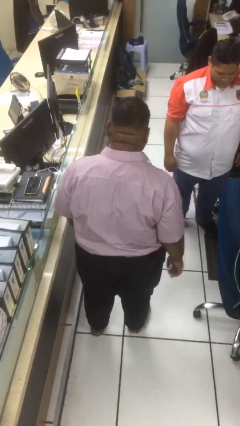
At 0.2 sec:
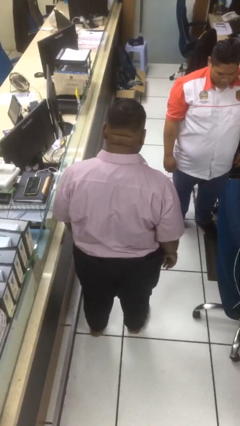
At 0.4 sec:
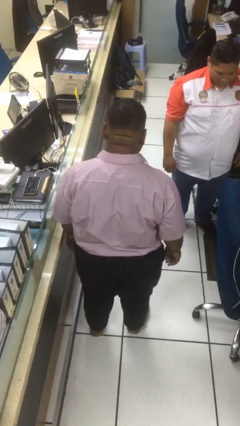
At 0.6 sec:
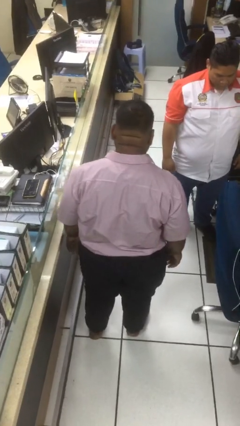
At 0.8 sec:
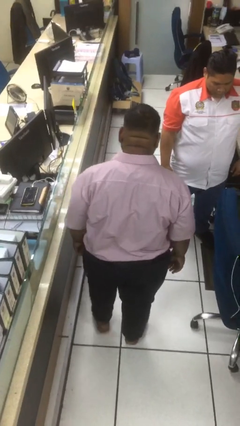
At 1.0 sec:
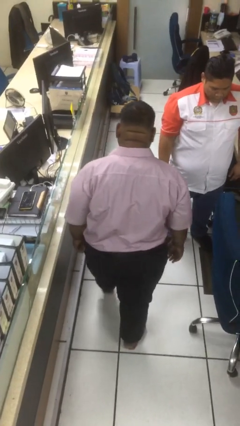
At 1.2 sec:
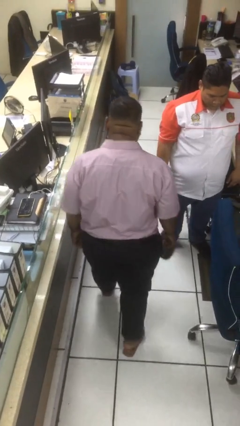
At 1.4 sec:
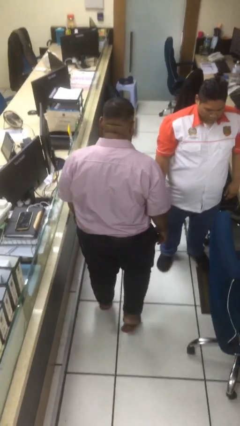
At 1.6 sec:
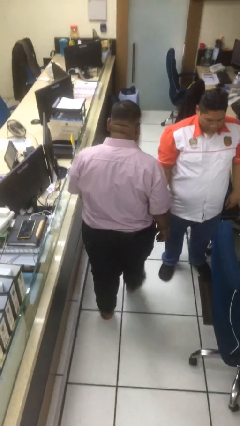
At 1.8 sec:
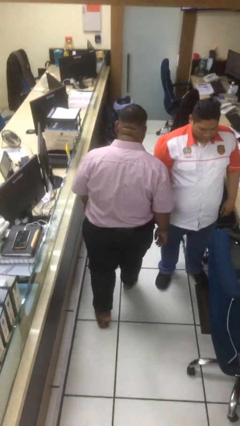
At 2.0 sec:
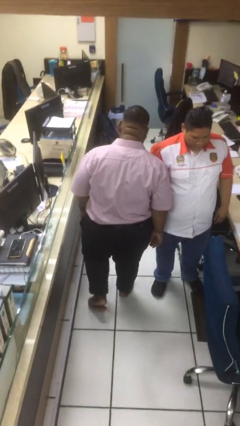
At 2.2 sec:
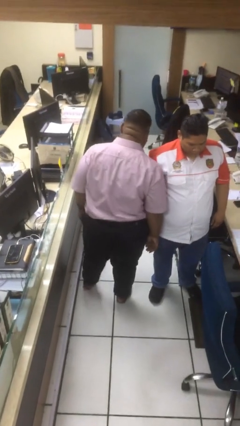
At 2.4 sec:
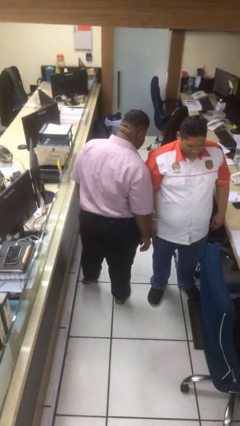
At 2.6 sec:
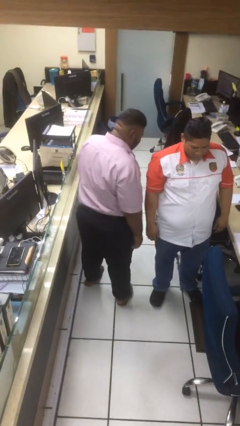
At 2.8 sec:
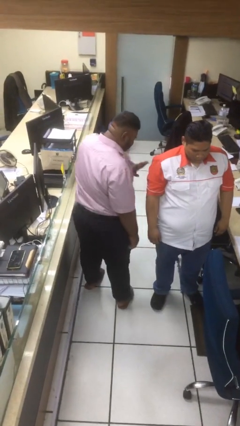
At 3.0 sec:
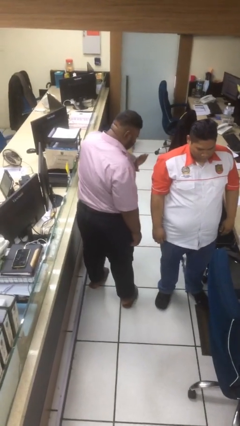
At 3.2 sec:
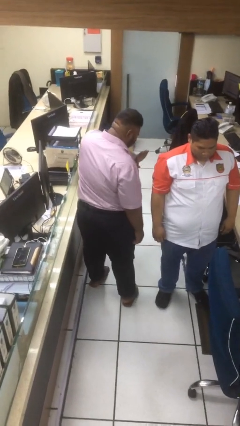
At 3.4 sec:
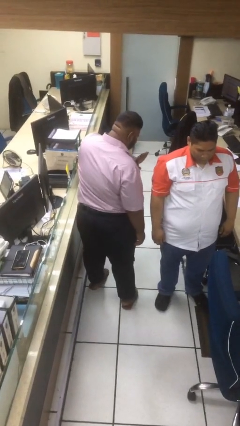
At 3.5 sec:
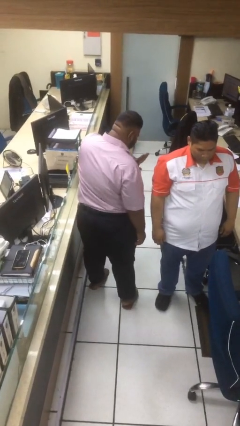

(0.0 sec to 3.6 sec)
person bumps into person

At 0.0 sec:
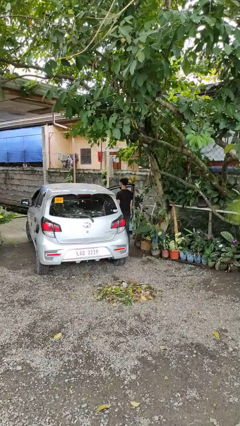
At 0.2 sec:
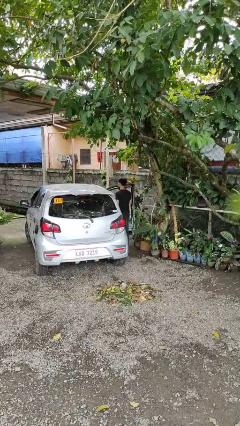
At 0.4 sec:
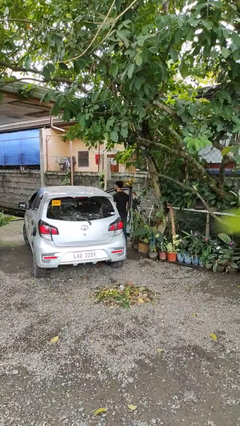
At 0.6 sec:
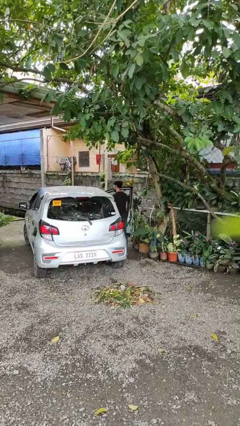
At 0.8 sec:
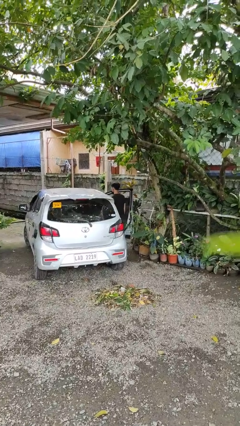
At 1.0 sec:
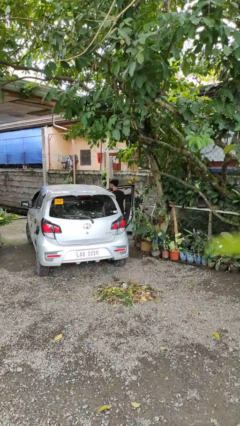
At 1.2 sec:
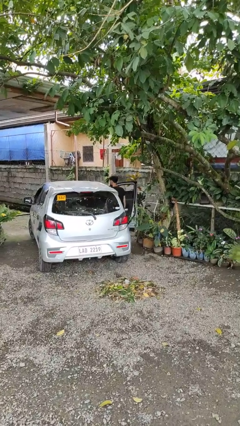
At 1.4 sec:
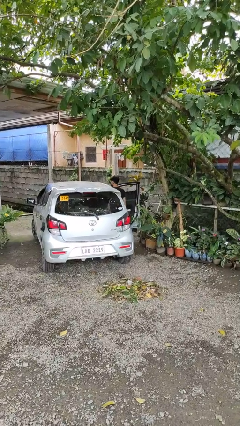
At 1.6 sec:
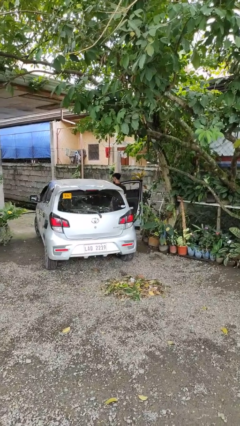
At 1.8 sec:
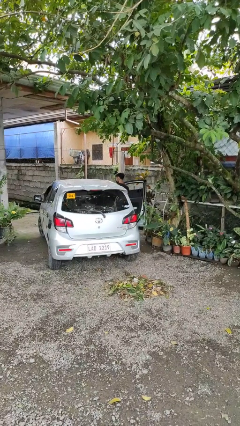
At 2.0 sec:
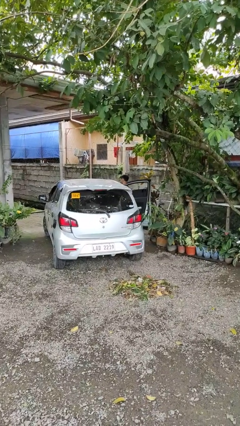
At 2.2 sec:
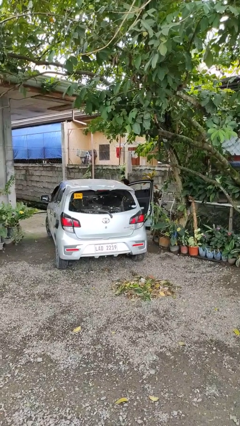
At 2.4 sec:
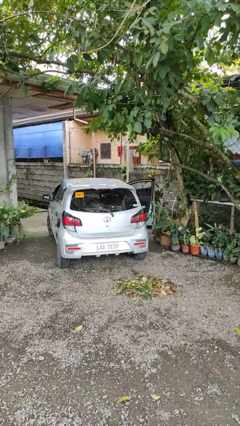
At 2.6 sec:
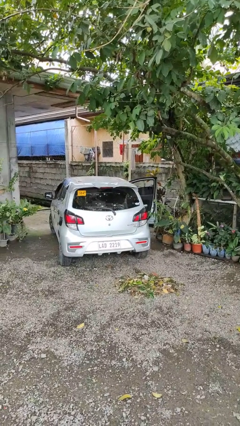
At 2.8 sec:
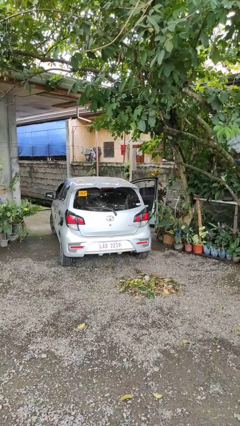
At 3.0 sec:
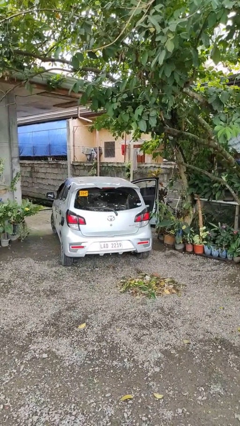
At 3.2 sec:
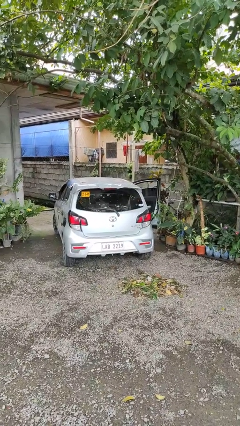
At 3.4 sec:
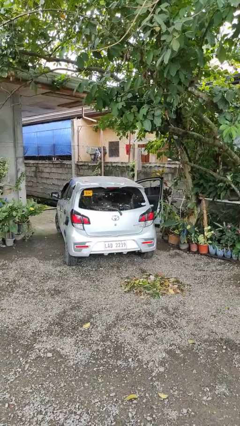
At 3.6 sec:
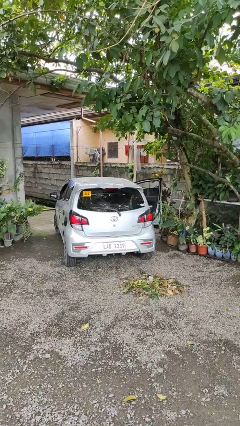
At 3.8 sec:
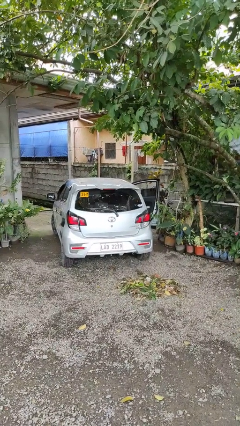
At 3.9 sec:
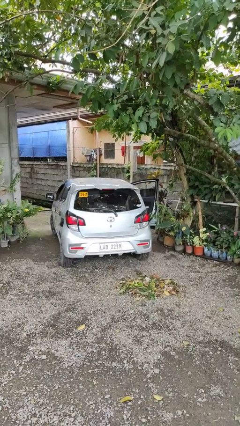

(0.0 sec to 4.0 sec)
person enters car

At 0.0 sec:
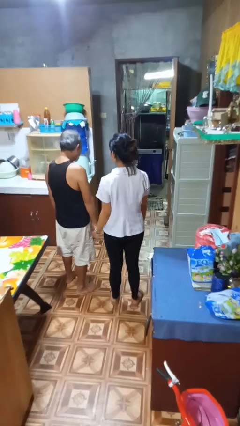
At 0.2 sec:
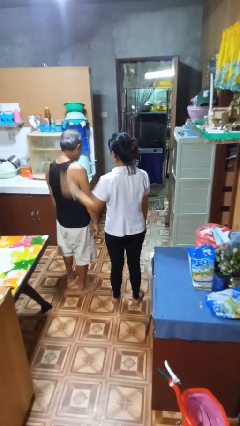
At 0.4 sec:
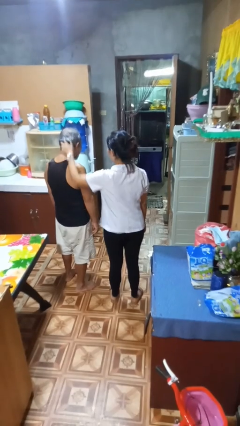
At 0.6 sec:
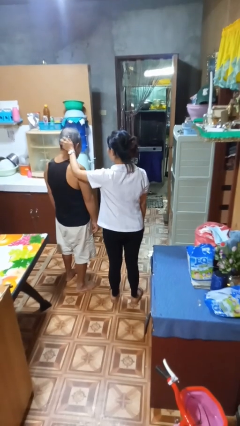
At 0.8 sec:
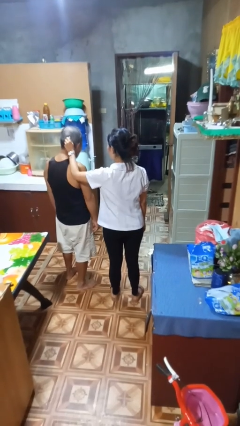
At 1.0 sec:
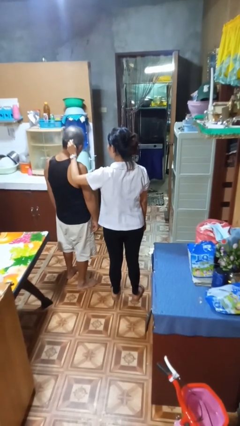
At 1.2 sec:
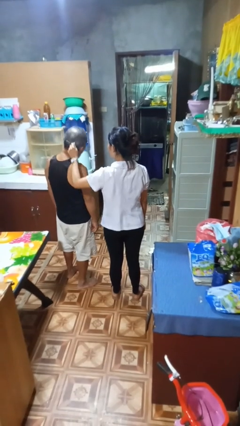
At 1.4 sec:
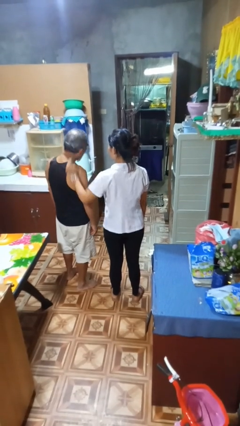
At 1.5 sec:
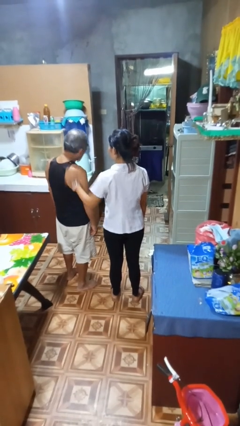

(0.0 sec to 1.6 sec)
person grabs person by hair

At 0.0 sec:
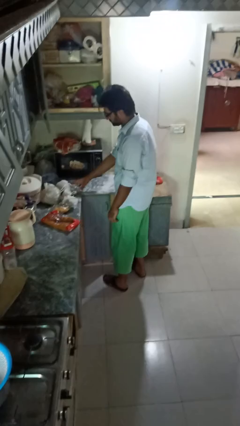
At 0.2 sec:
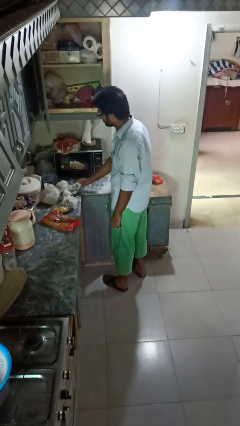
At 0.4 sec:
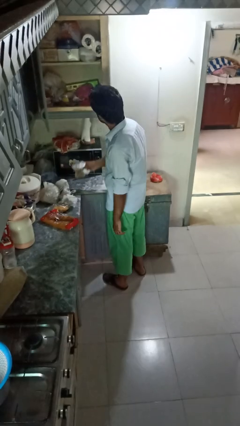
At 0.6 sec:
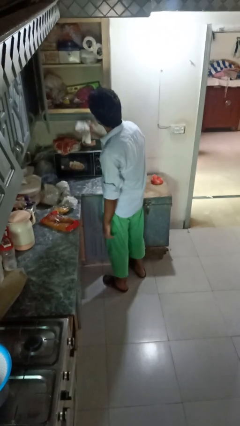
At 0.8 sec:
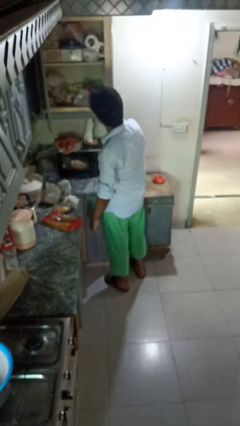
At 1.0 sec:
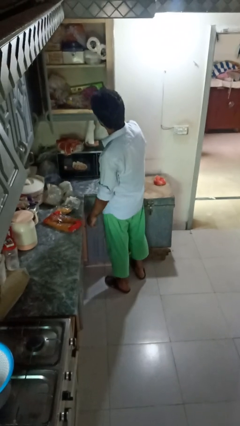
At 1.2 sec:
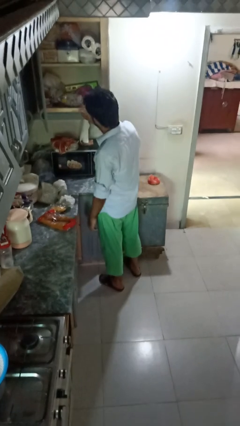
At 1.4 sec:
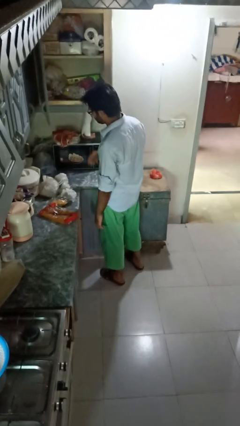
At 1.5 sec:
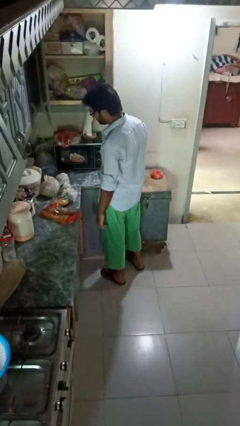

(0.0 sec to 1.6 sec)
person loads groceries into cabinet

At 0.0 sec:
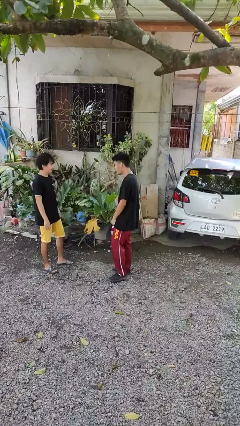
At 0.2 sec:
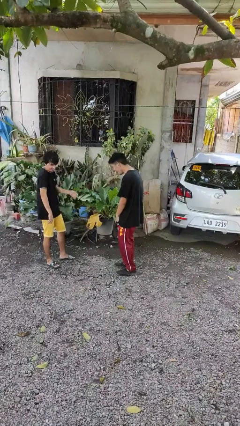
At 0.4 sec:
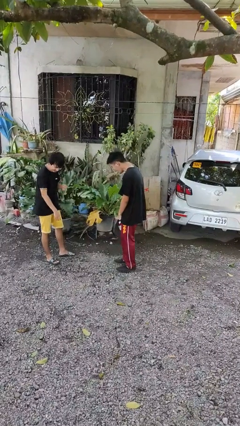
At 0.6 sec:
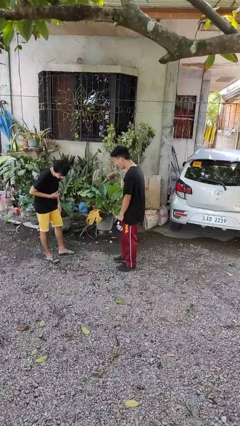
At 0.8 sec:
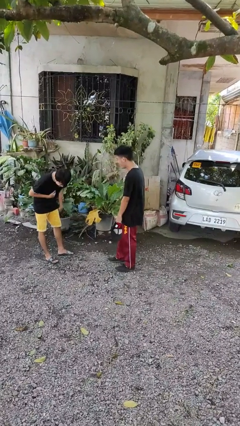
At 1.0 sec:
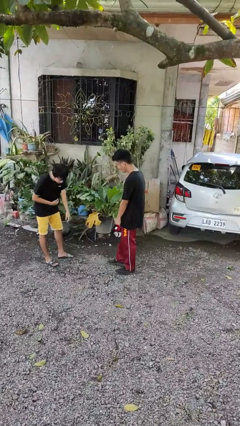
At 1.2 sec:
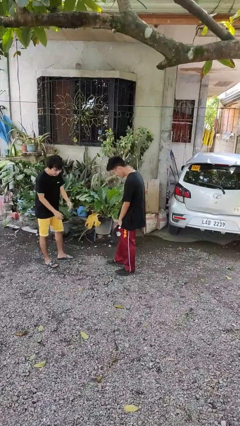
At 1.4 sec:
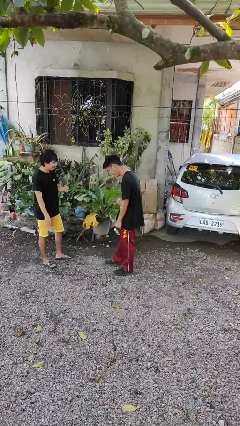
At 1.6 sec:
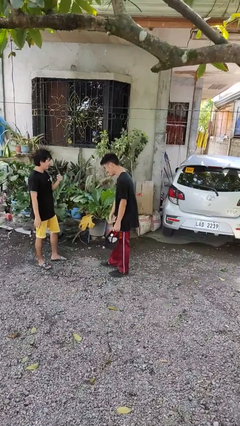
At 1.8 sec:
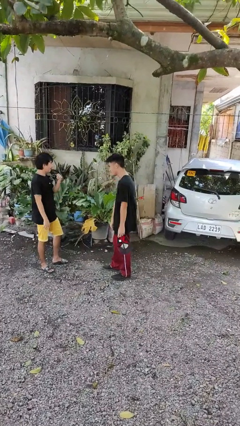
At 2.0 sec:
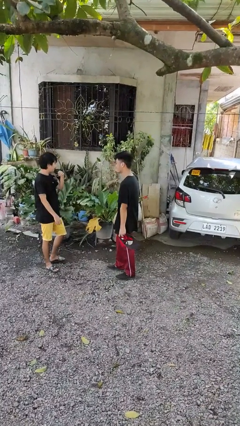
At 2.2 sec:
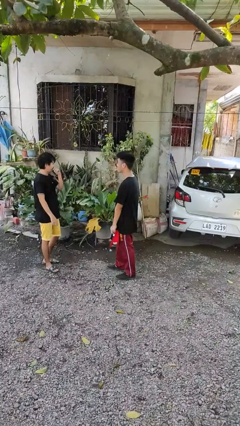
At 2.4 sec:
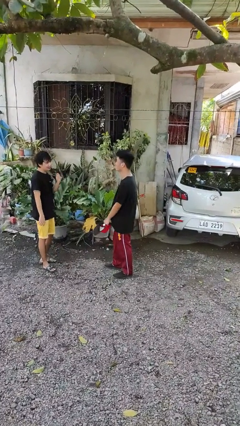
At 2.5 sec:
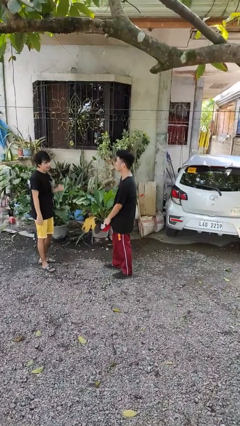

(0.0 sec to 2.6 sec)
person laughs with person

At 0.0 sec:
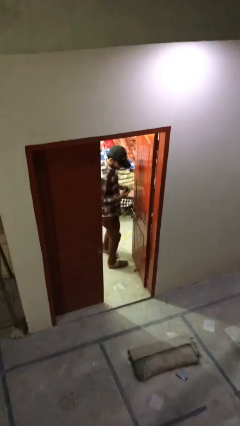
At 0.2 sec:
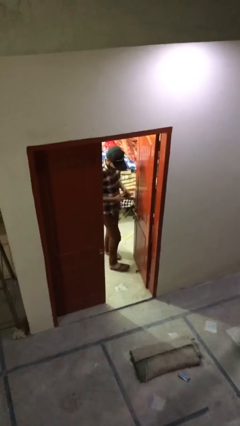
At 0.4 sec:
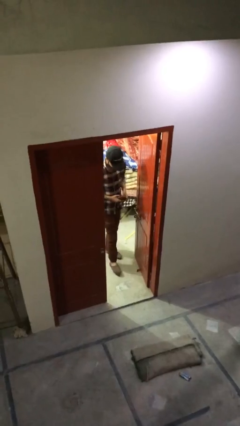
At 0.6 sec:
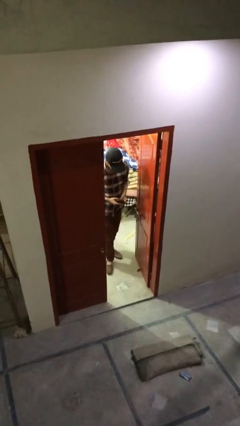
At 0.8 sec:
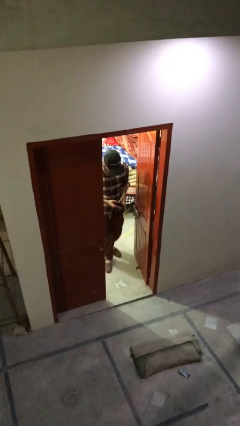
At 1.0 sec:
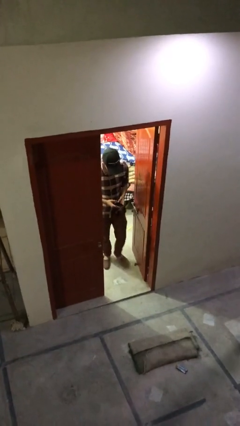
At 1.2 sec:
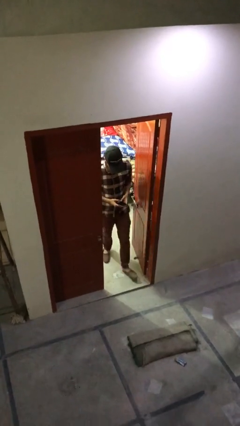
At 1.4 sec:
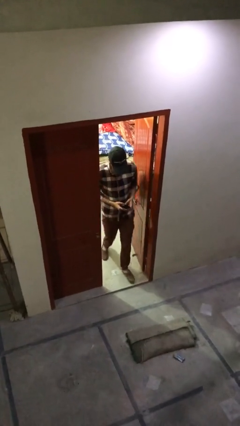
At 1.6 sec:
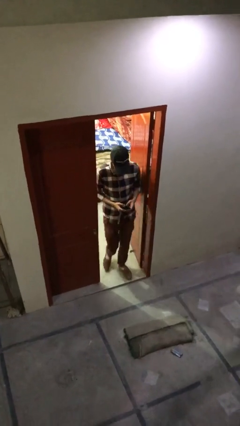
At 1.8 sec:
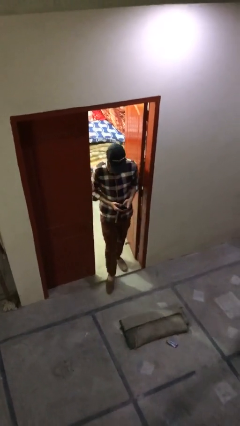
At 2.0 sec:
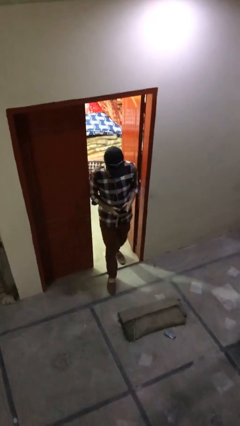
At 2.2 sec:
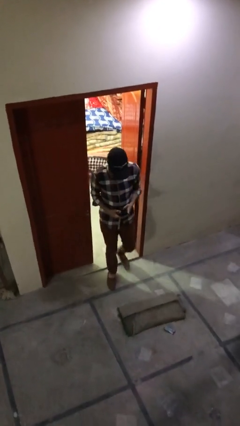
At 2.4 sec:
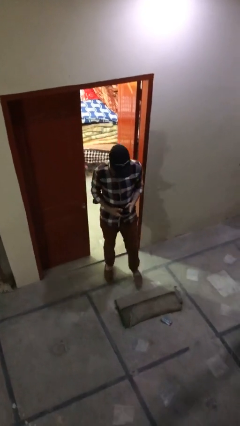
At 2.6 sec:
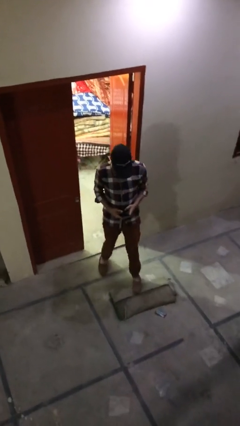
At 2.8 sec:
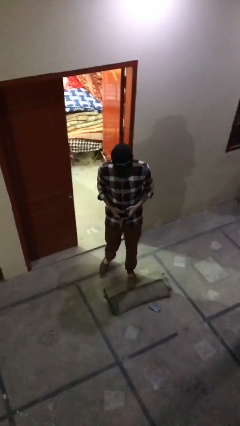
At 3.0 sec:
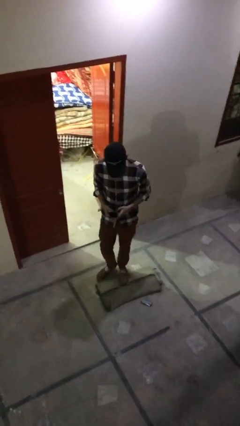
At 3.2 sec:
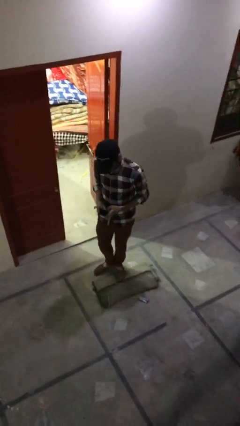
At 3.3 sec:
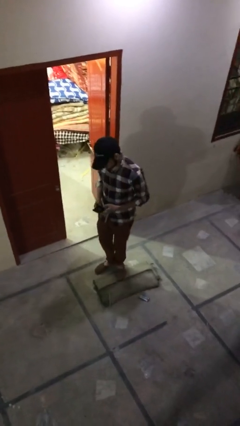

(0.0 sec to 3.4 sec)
person enters scene through structure

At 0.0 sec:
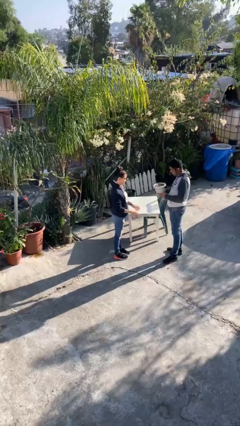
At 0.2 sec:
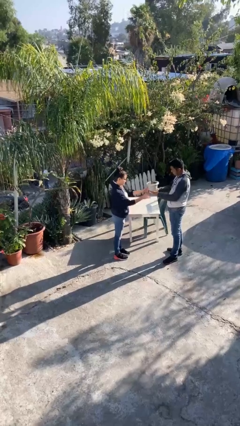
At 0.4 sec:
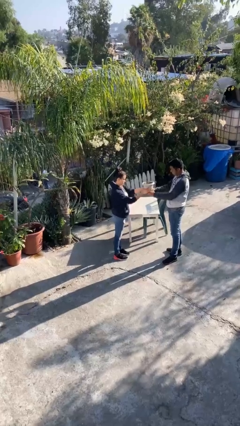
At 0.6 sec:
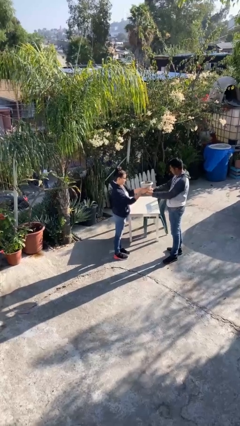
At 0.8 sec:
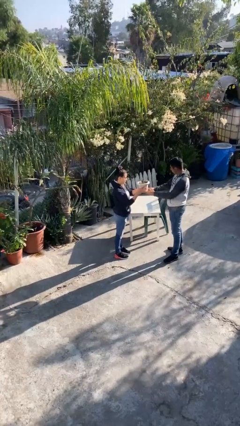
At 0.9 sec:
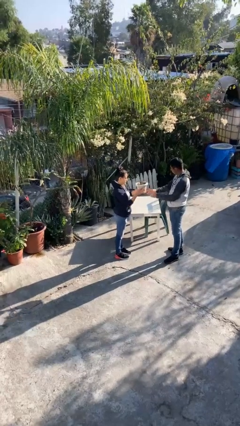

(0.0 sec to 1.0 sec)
person transfers object to person
